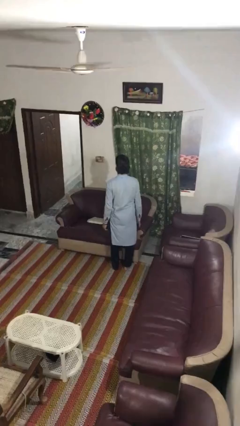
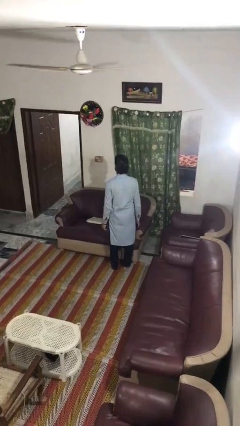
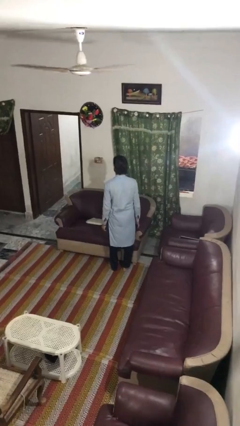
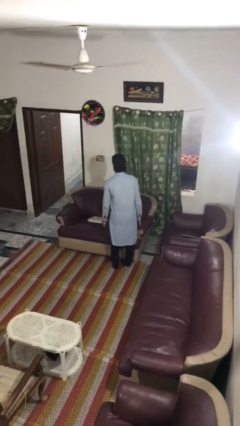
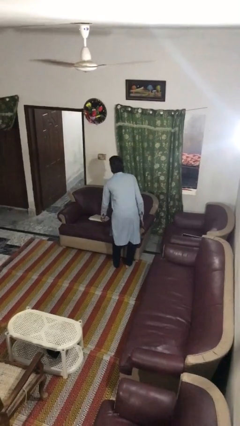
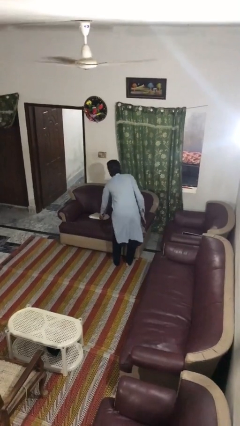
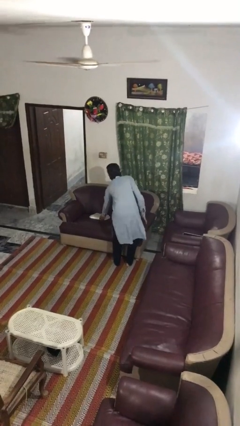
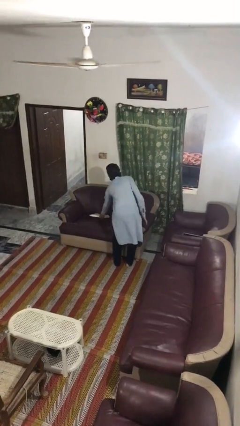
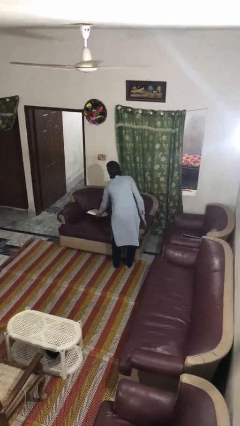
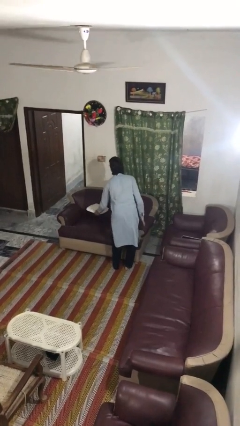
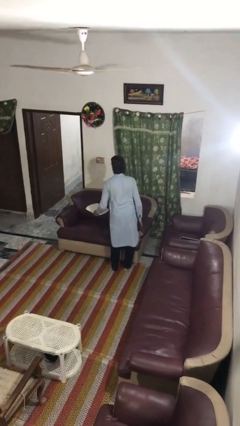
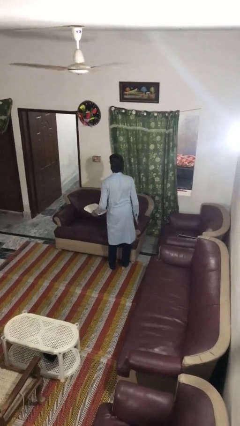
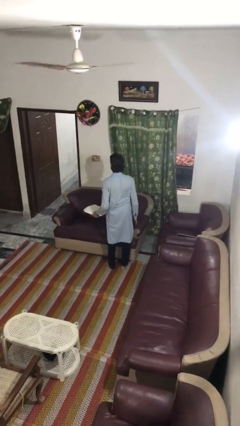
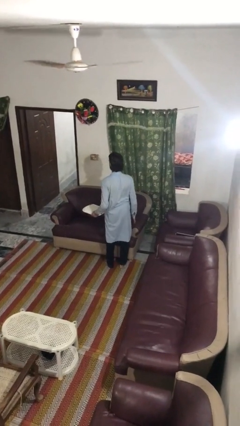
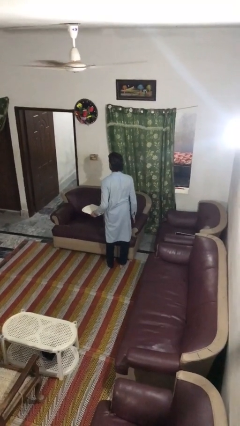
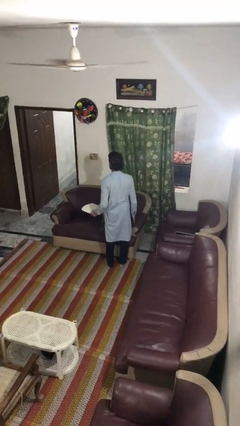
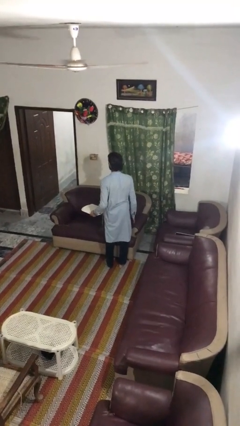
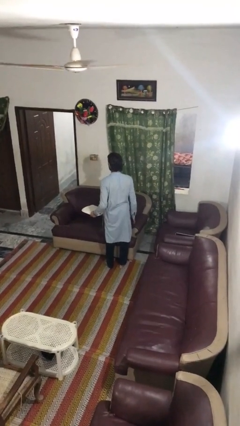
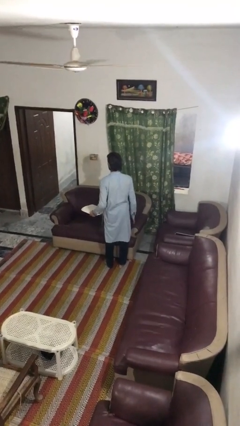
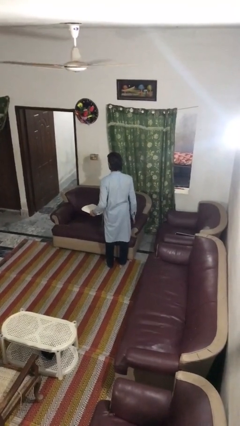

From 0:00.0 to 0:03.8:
person picks up object from couch

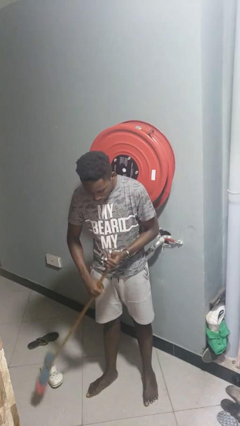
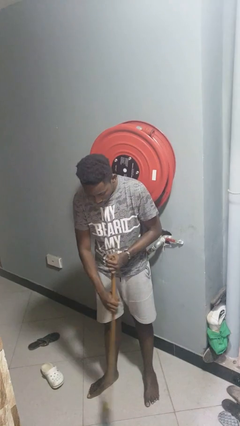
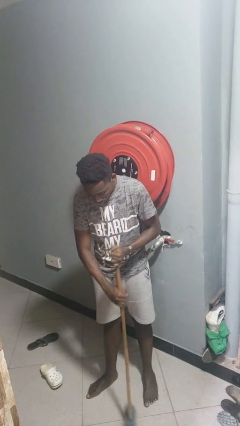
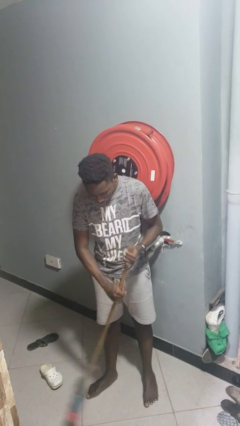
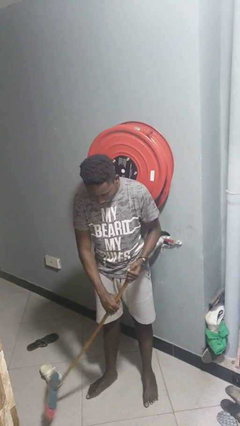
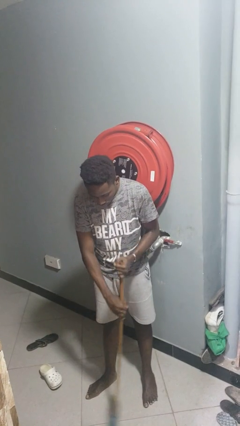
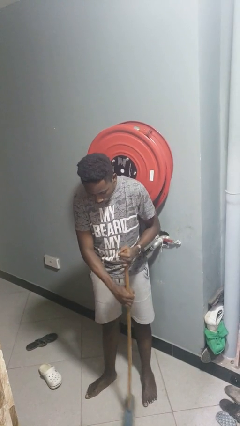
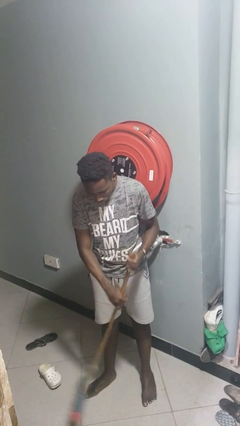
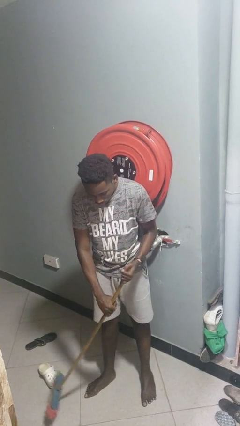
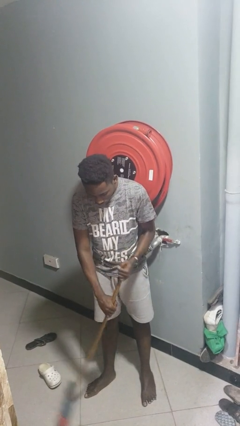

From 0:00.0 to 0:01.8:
person sweeps floor

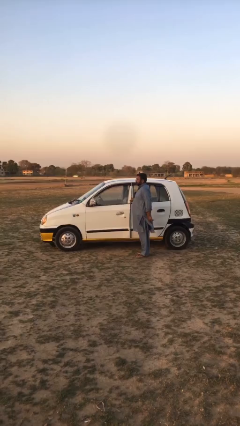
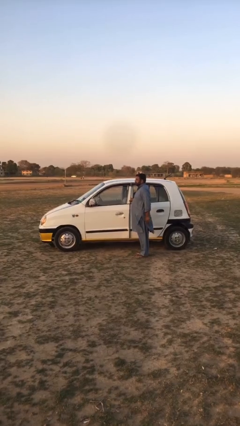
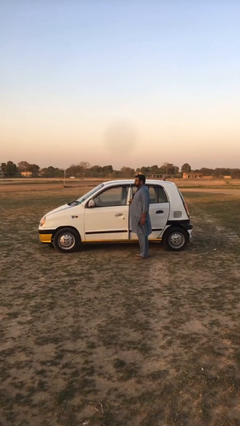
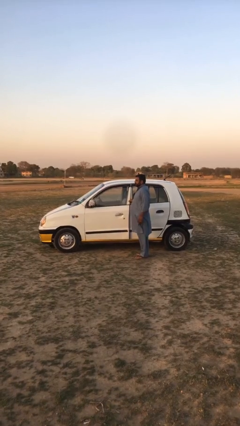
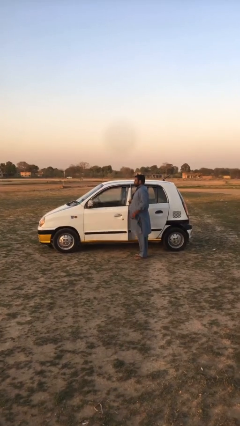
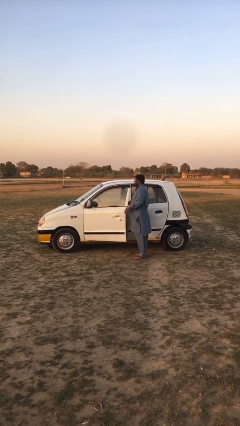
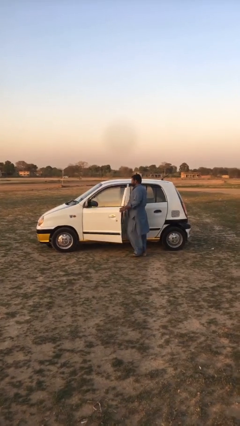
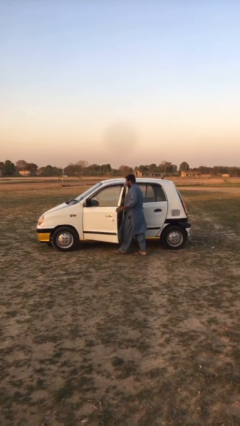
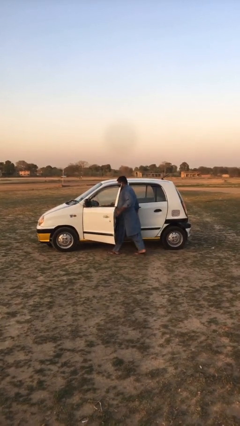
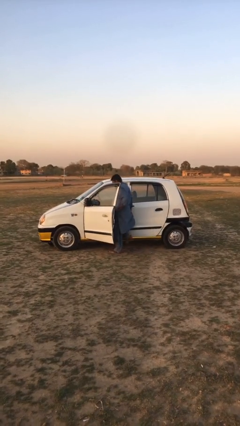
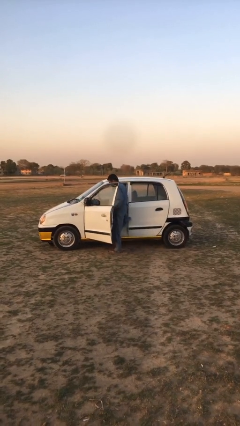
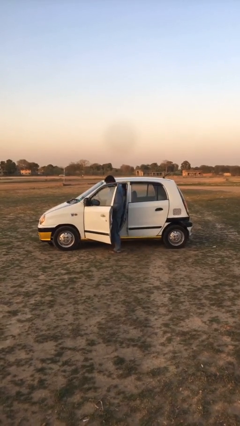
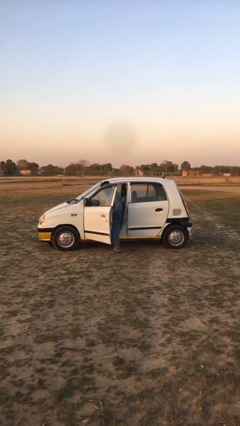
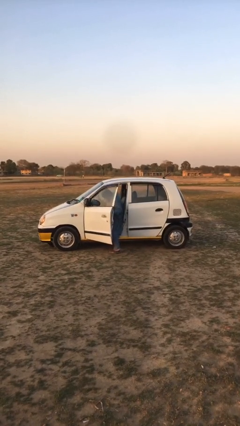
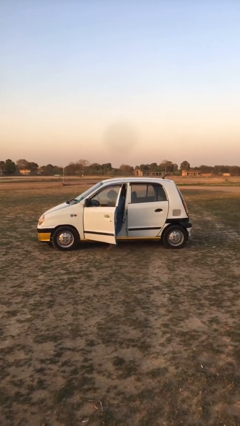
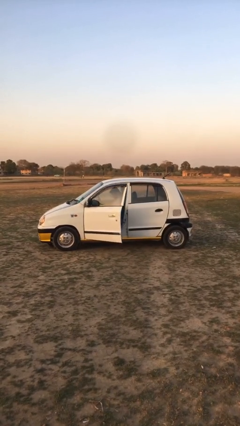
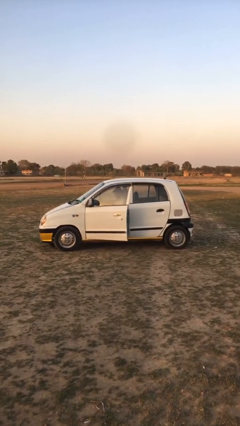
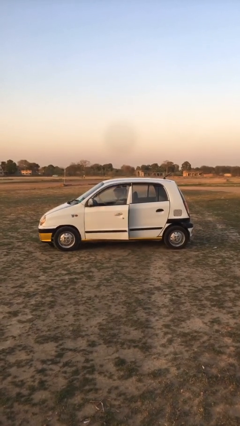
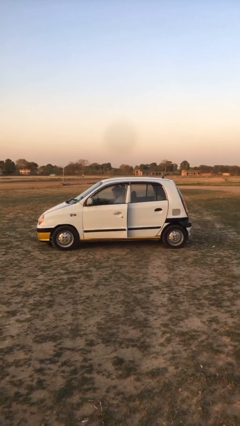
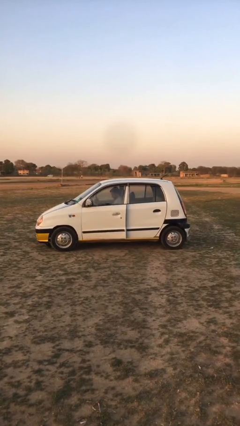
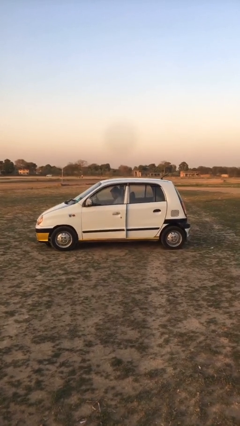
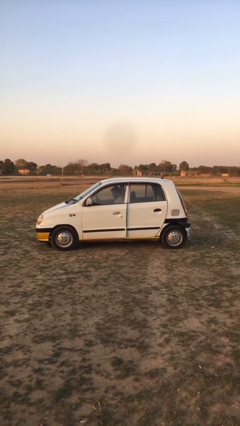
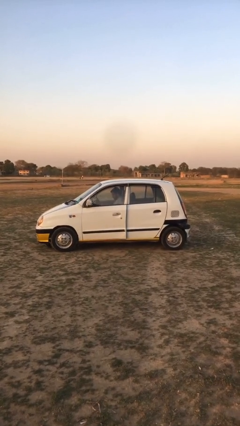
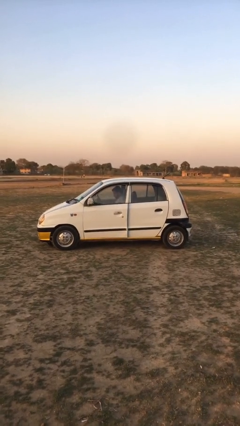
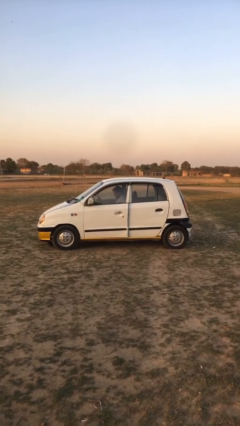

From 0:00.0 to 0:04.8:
car picks up person

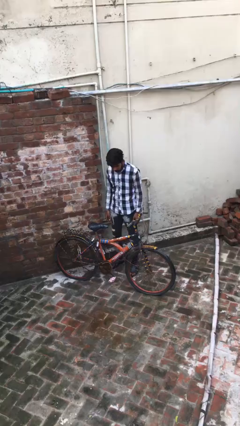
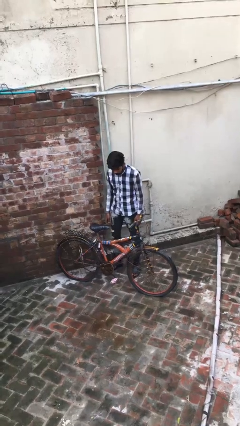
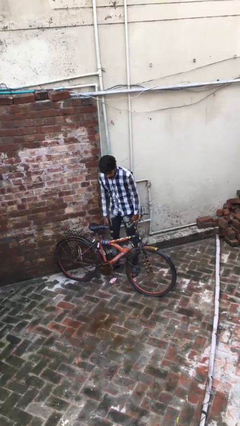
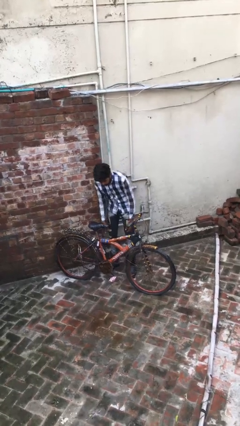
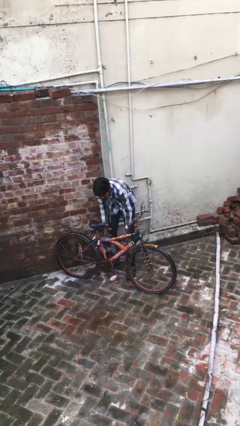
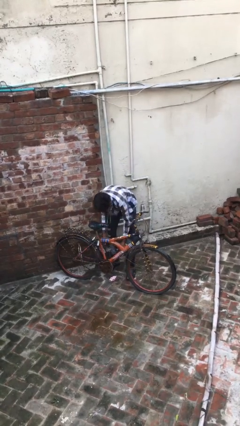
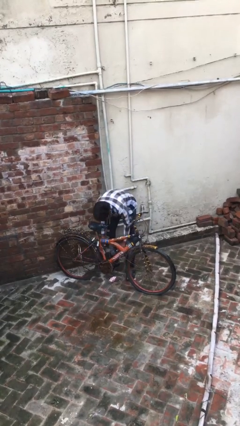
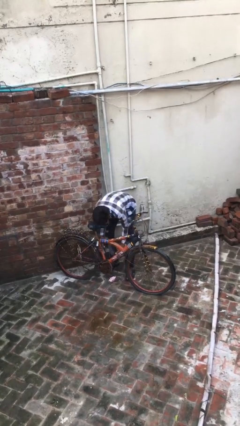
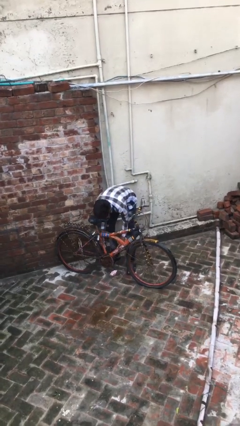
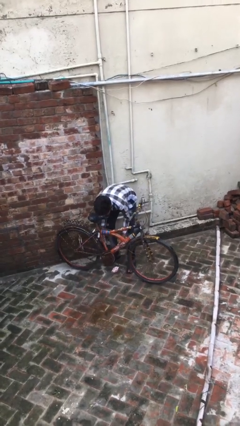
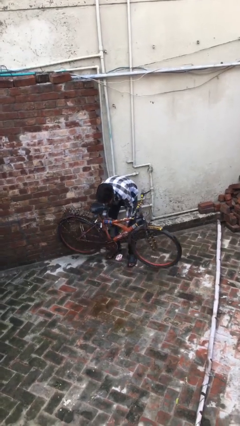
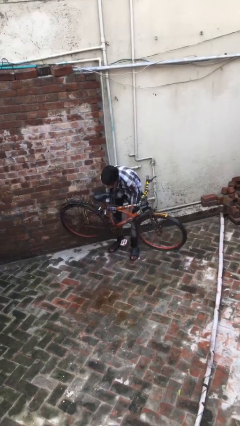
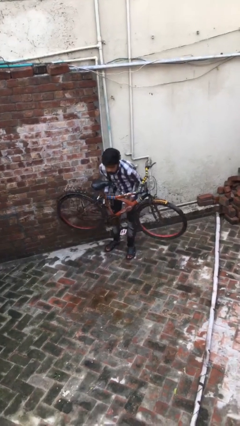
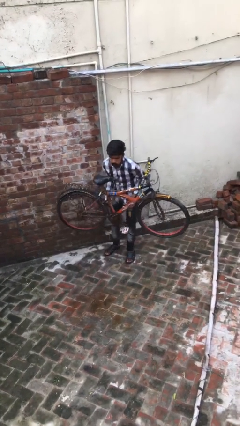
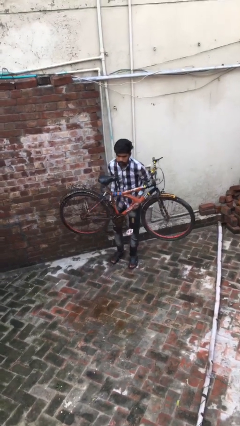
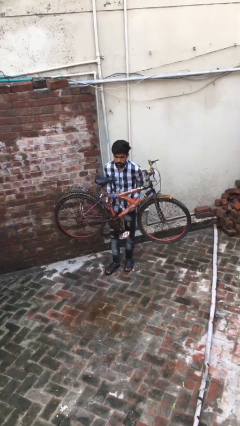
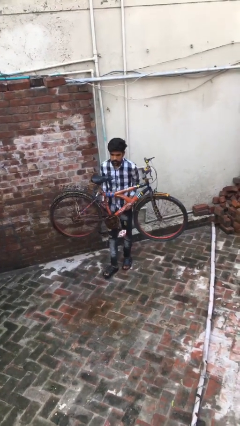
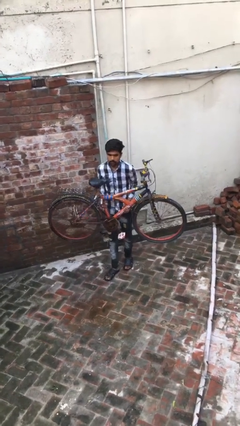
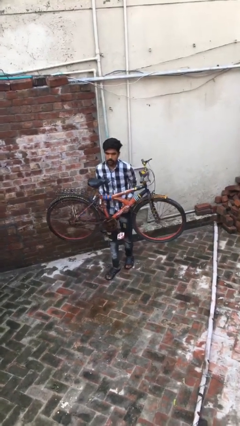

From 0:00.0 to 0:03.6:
person picks up object from floor

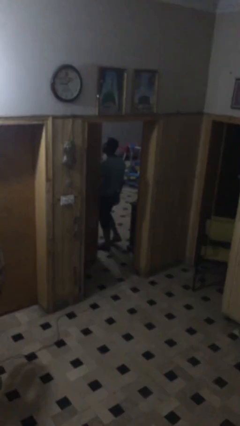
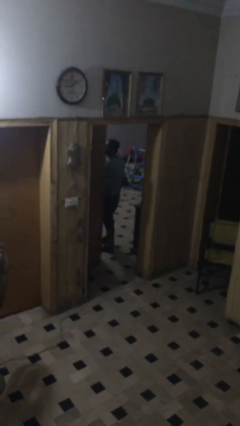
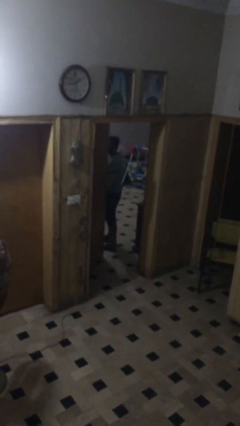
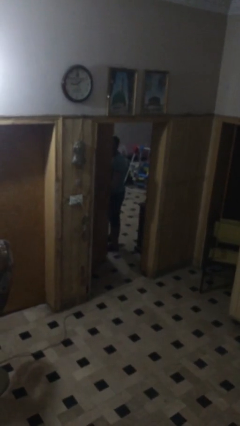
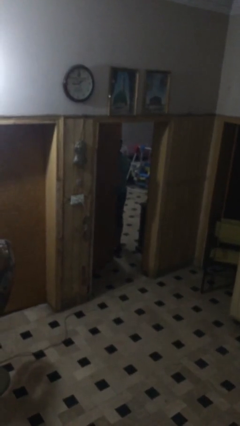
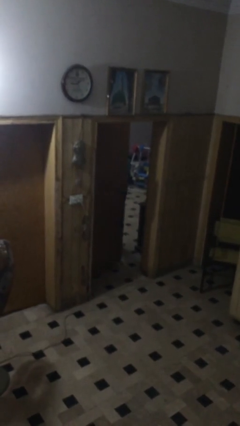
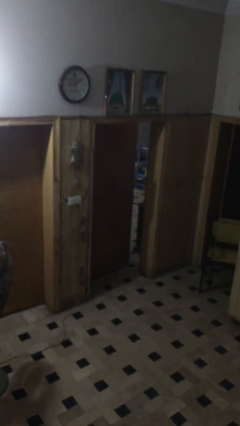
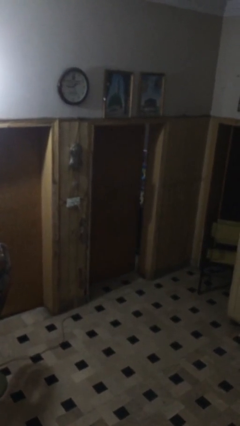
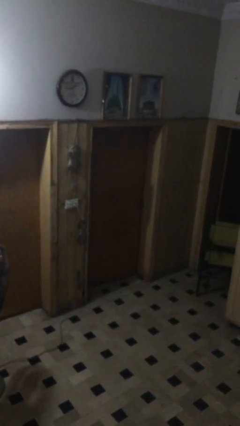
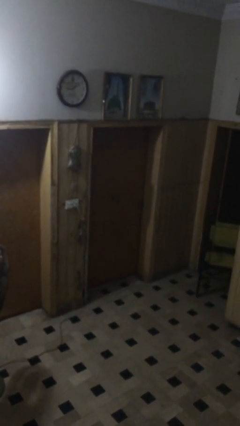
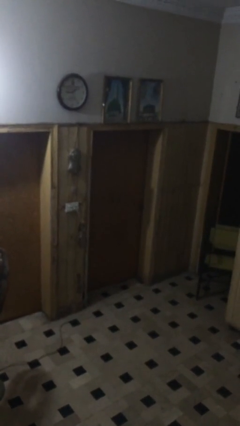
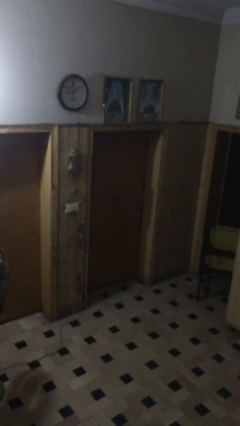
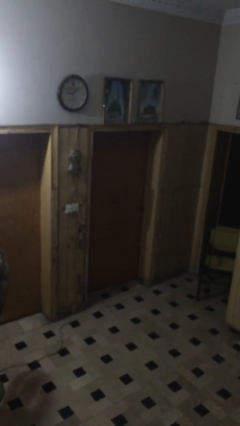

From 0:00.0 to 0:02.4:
person closes facility door

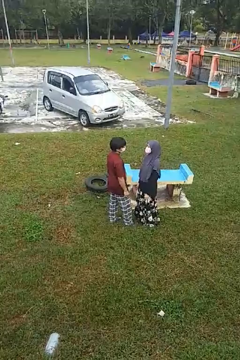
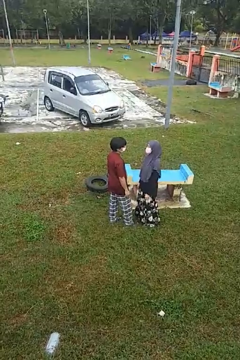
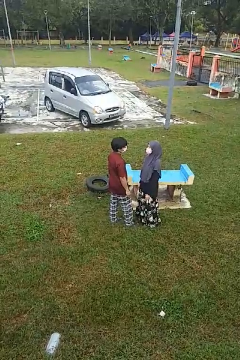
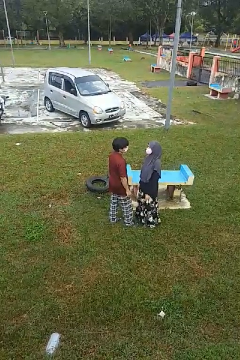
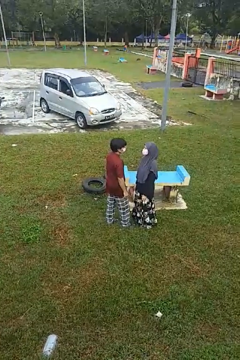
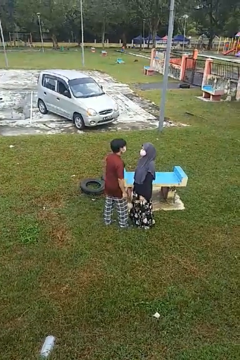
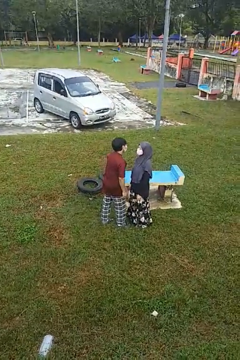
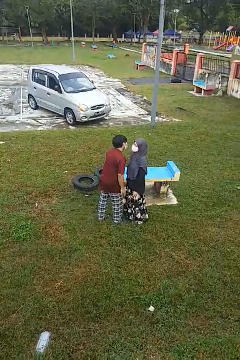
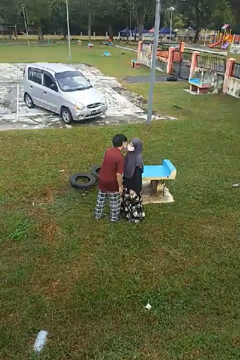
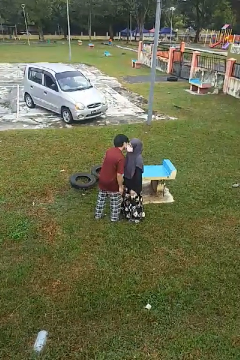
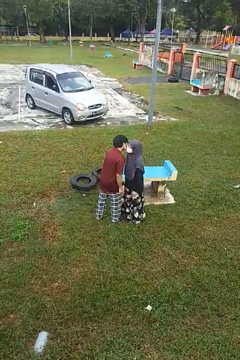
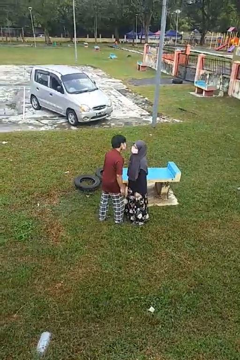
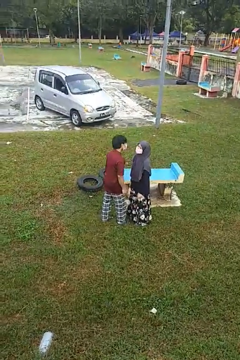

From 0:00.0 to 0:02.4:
person kisses cheek of person
